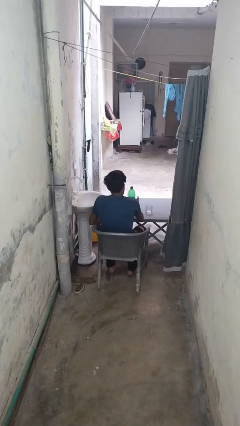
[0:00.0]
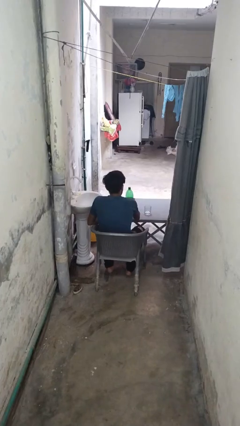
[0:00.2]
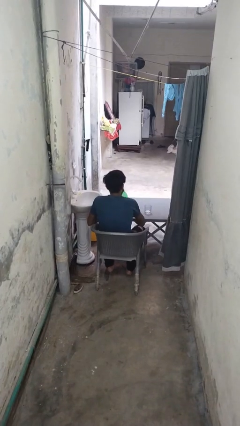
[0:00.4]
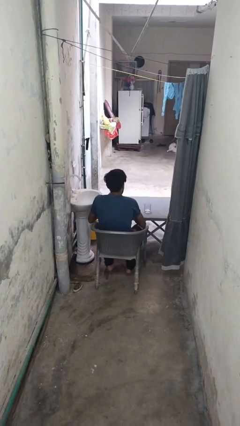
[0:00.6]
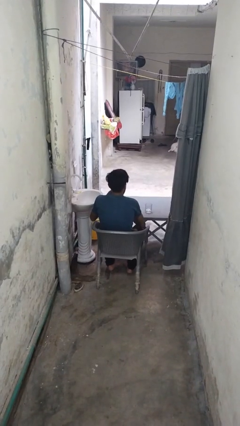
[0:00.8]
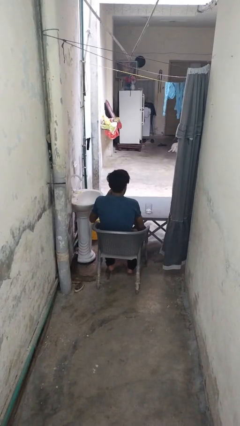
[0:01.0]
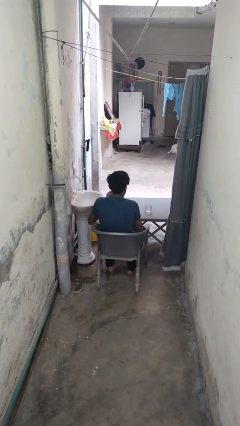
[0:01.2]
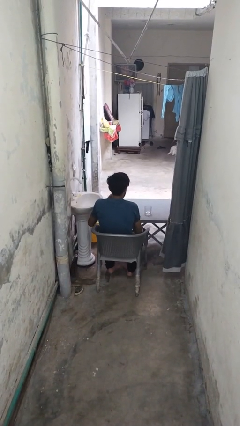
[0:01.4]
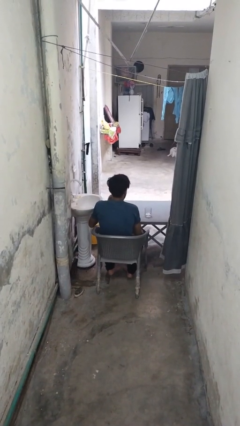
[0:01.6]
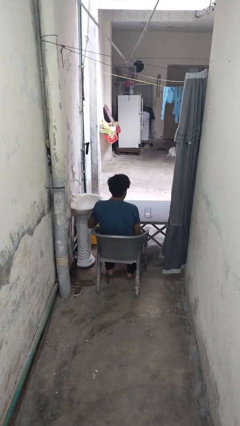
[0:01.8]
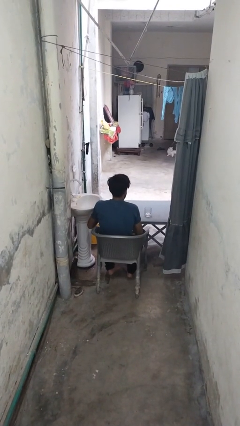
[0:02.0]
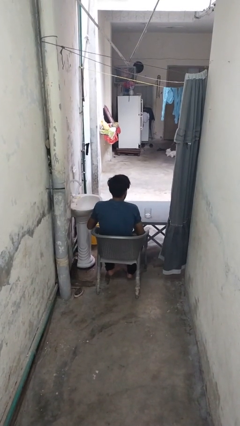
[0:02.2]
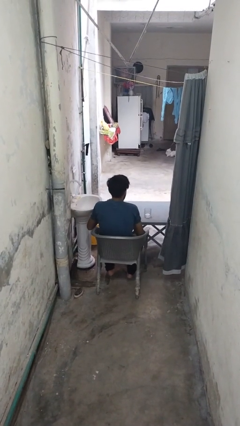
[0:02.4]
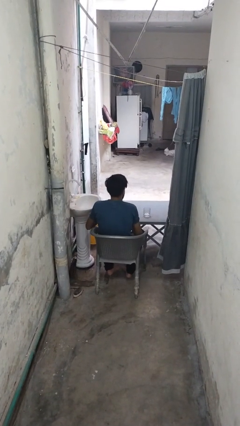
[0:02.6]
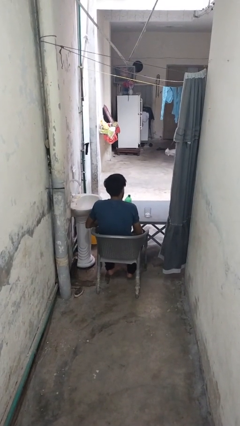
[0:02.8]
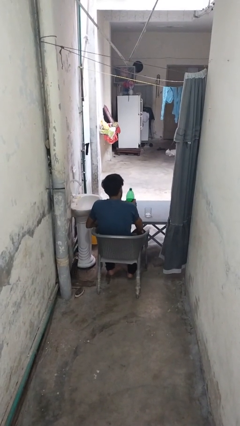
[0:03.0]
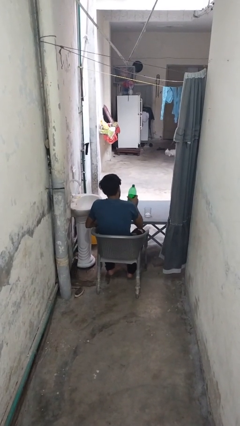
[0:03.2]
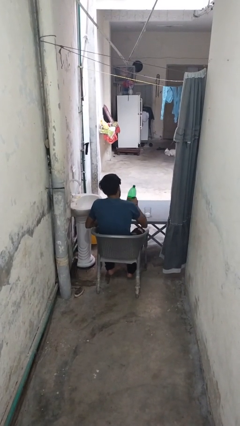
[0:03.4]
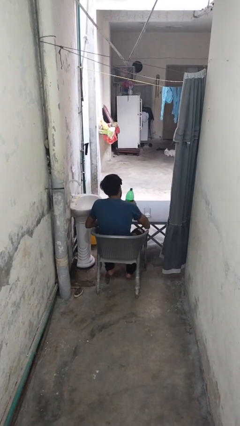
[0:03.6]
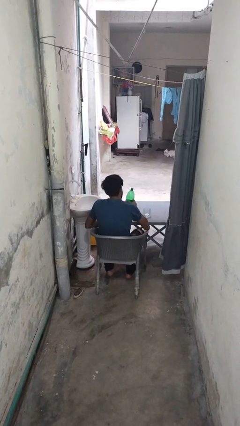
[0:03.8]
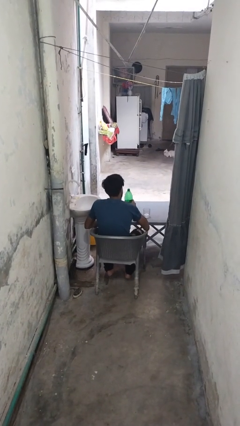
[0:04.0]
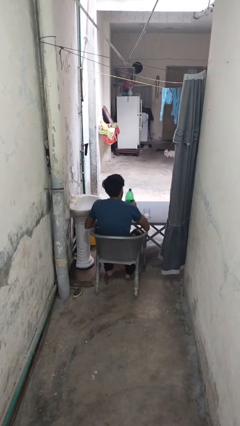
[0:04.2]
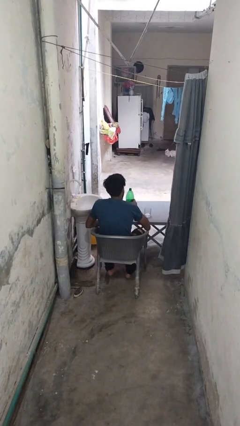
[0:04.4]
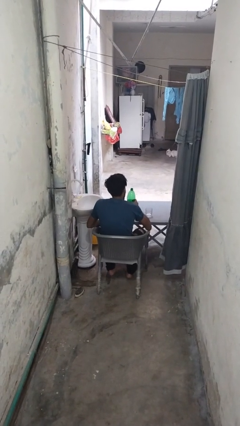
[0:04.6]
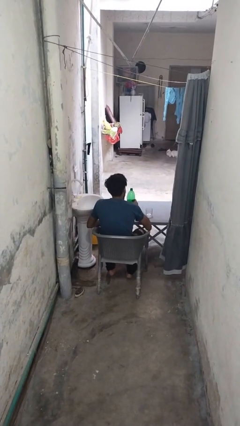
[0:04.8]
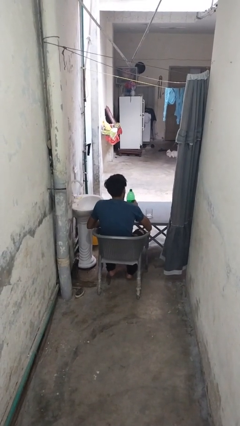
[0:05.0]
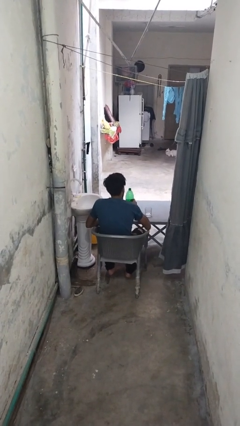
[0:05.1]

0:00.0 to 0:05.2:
person unscrews lid from bottle

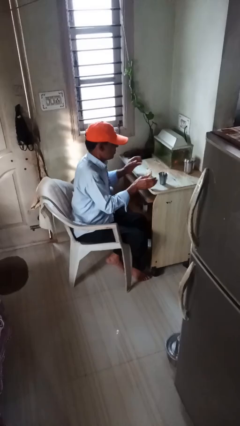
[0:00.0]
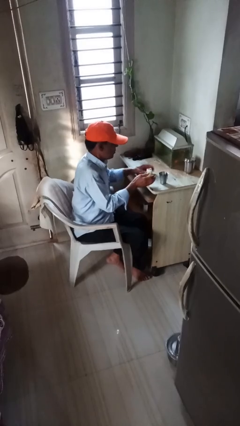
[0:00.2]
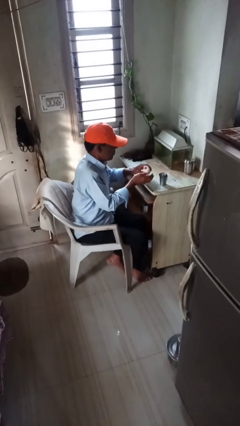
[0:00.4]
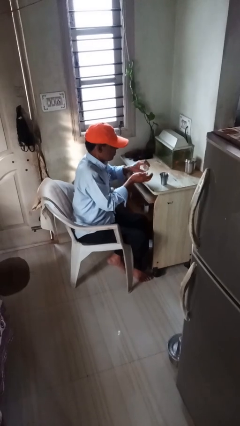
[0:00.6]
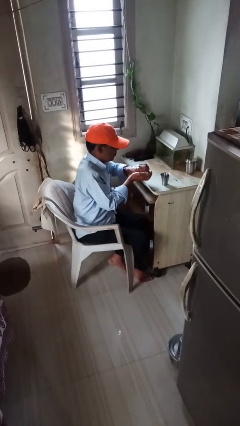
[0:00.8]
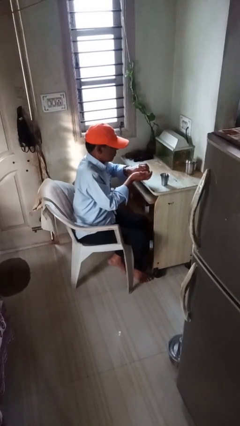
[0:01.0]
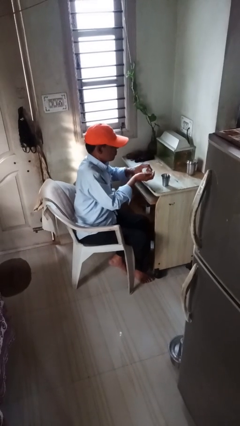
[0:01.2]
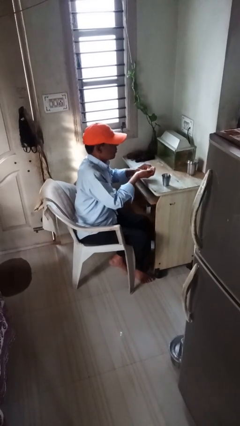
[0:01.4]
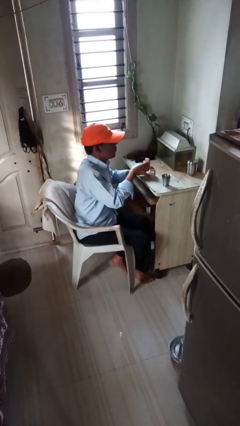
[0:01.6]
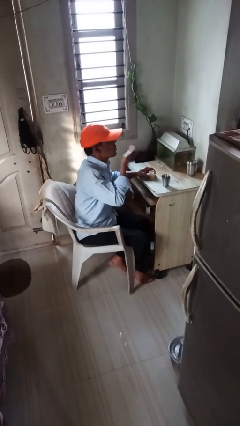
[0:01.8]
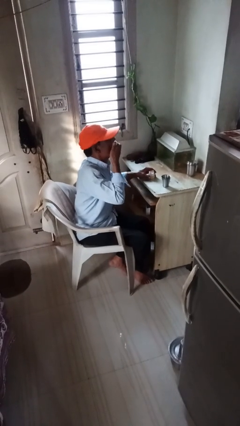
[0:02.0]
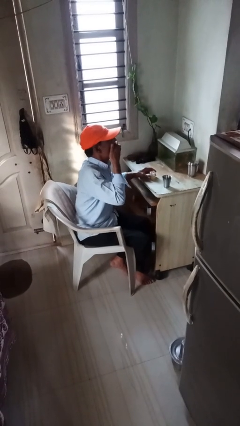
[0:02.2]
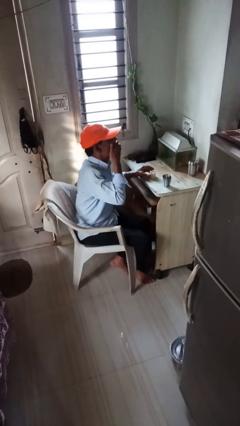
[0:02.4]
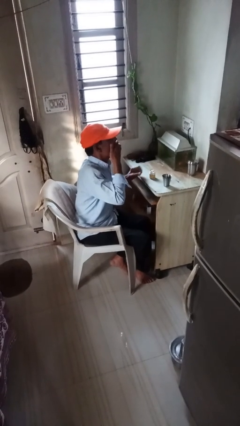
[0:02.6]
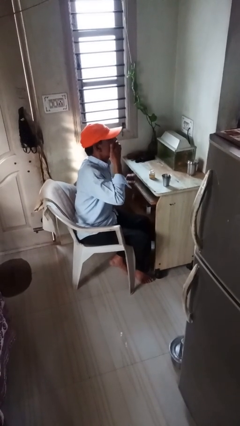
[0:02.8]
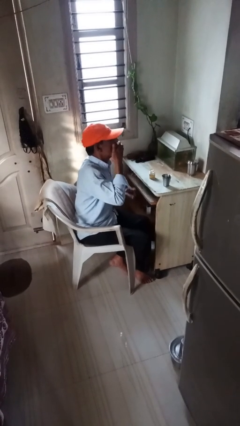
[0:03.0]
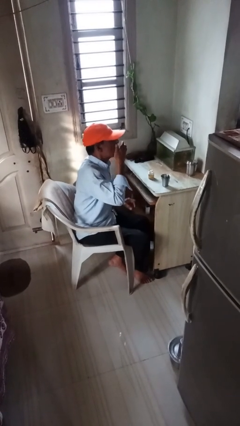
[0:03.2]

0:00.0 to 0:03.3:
person takes medicine pills

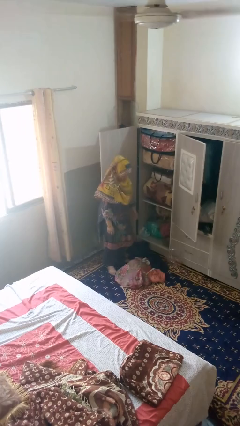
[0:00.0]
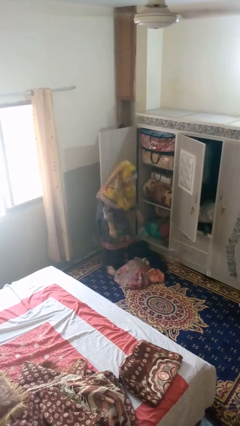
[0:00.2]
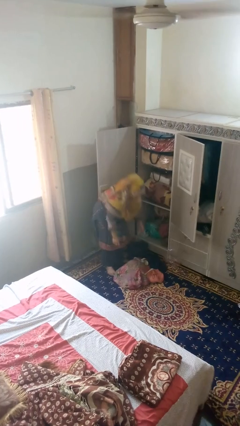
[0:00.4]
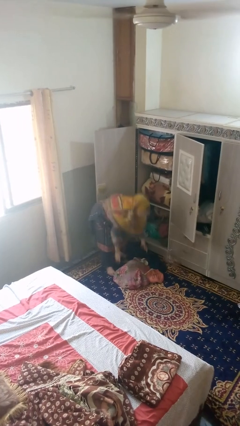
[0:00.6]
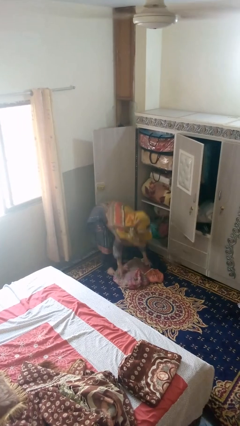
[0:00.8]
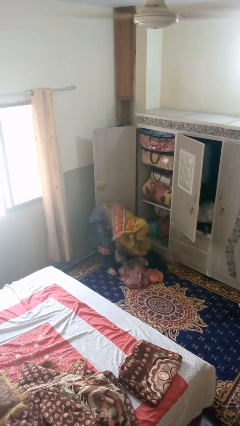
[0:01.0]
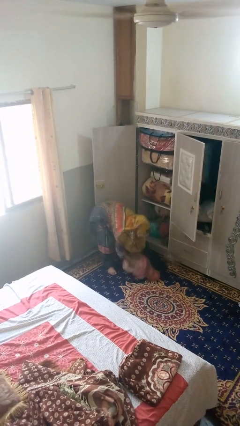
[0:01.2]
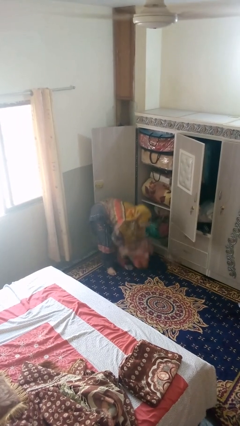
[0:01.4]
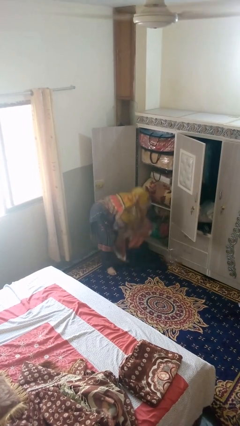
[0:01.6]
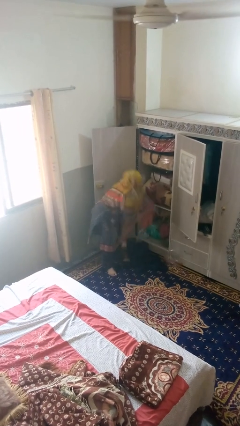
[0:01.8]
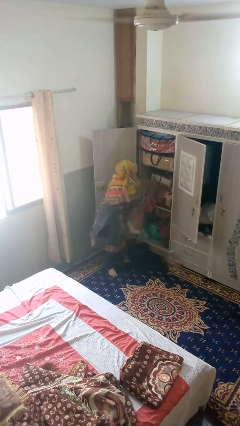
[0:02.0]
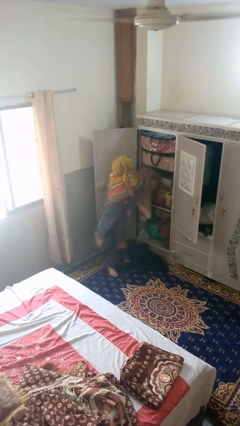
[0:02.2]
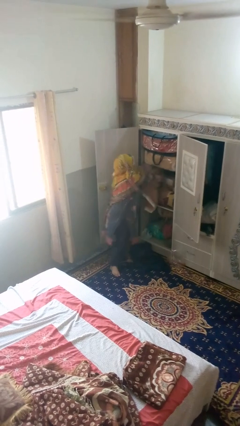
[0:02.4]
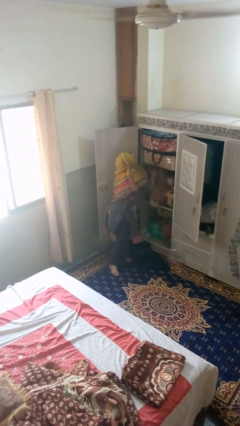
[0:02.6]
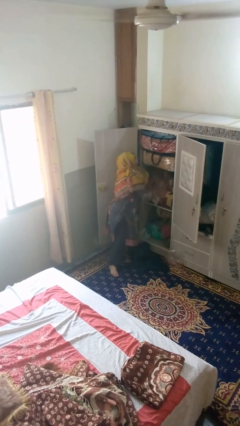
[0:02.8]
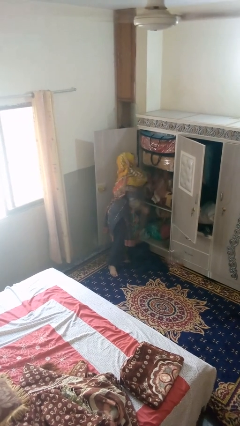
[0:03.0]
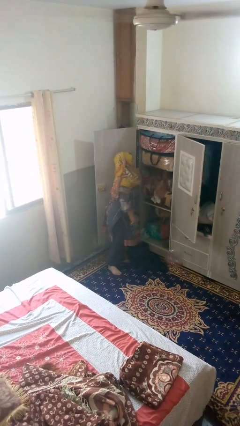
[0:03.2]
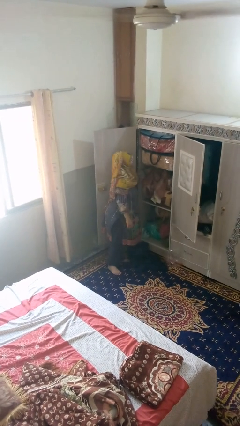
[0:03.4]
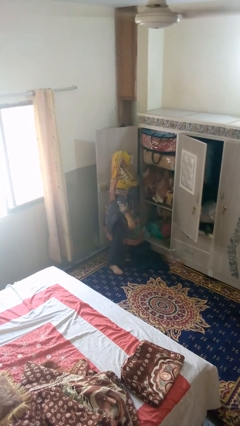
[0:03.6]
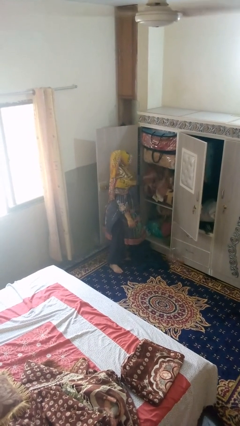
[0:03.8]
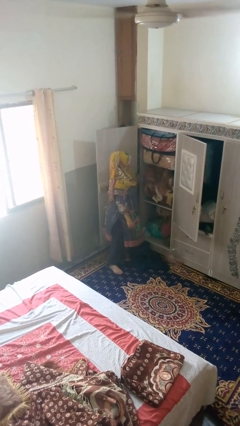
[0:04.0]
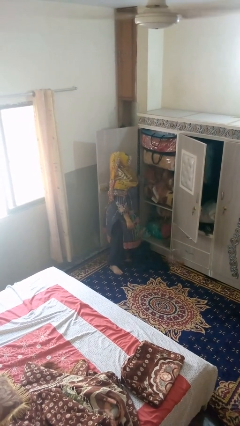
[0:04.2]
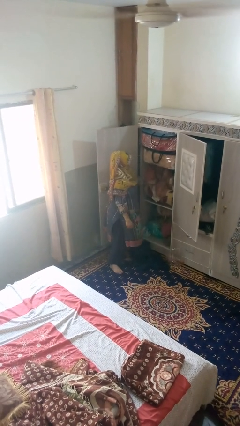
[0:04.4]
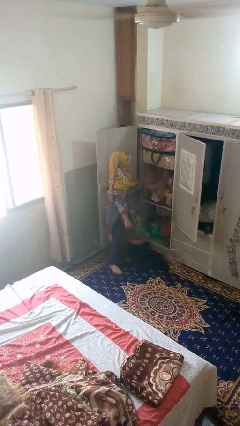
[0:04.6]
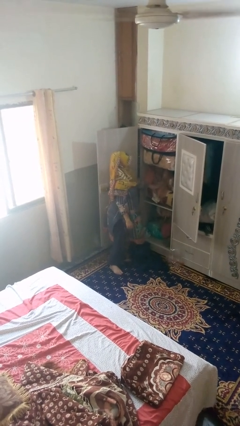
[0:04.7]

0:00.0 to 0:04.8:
person takes clothes from dresser

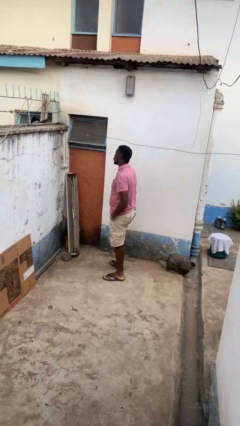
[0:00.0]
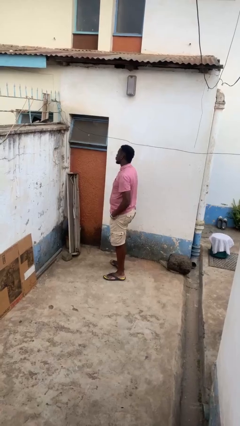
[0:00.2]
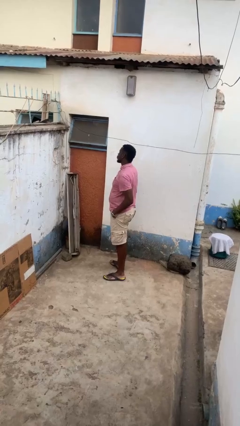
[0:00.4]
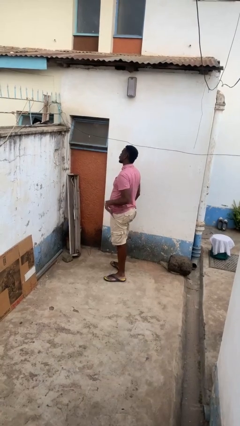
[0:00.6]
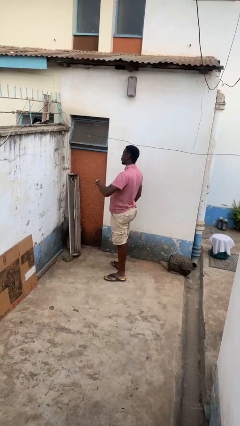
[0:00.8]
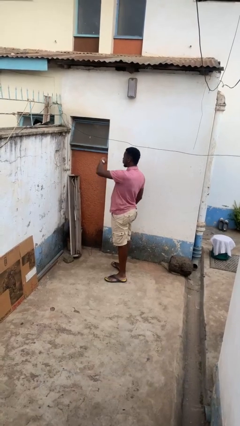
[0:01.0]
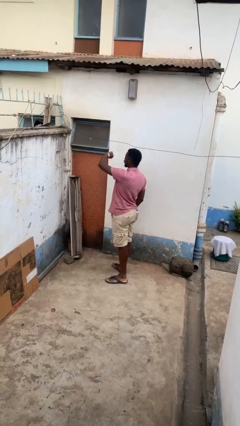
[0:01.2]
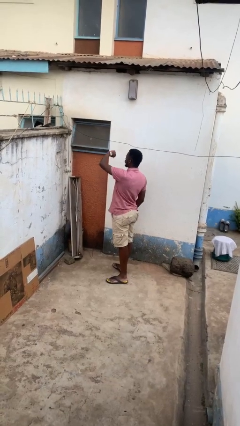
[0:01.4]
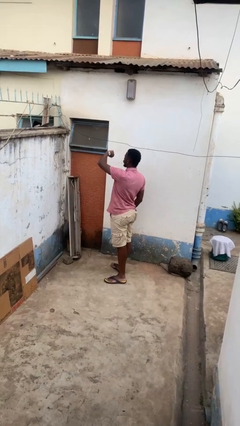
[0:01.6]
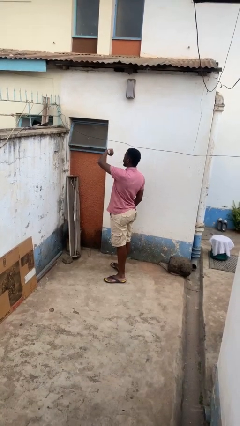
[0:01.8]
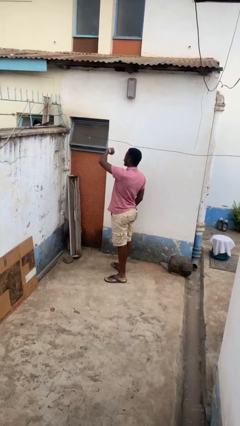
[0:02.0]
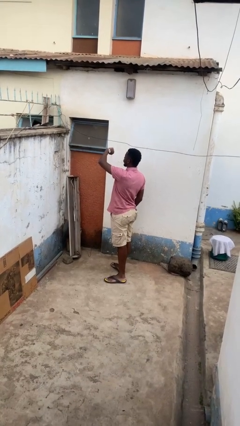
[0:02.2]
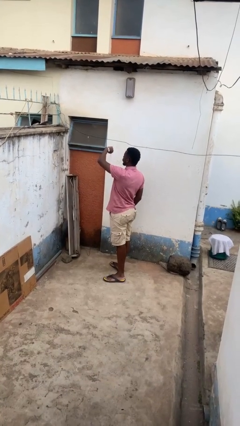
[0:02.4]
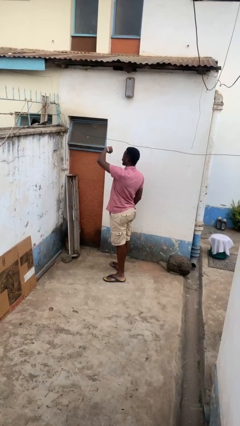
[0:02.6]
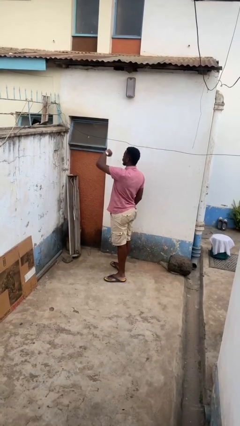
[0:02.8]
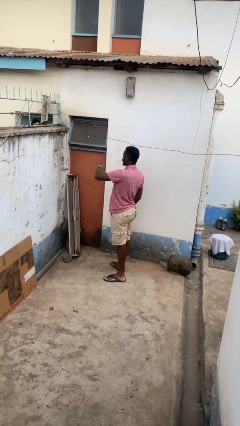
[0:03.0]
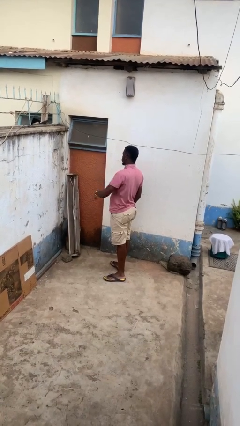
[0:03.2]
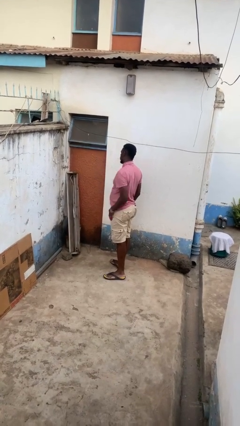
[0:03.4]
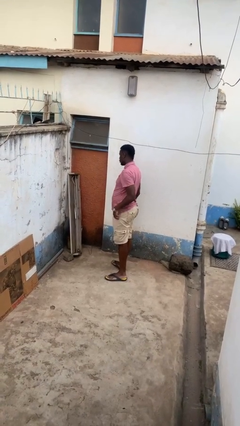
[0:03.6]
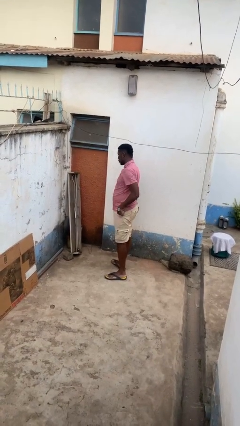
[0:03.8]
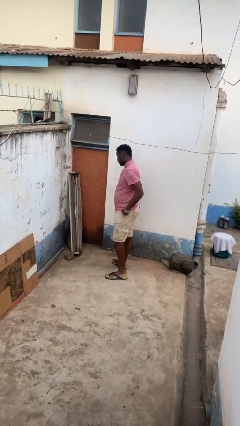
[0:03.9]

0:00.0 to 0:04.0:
person looks at wristwatch

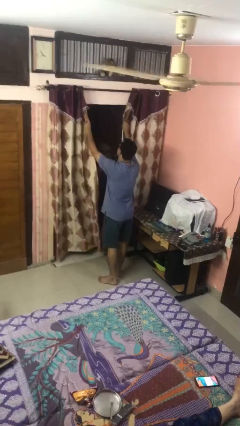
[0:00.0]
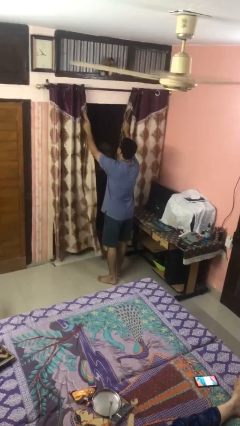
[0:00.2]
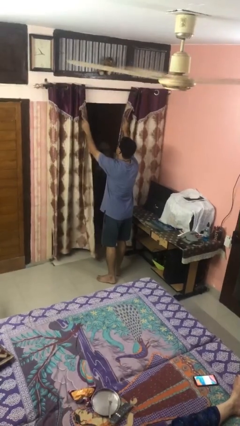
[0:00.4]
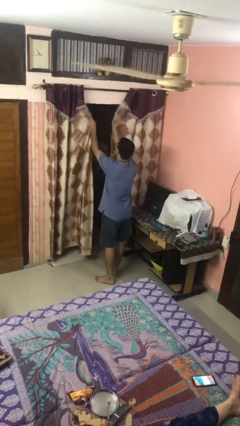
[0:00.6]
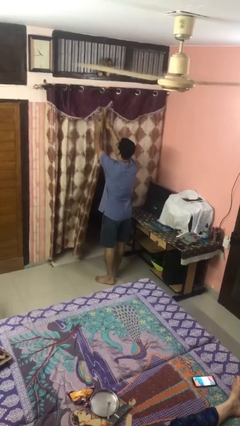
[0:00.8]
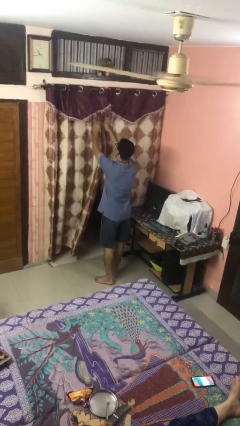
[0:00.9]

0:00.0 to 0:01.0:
person closes curtains
